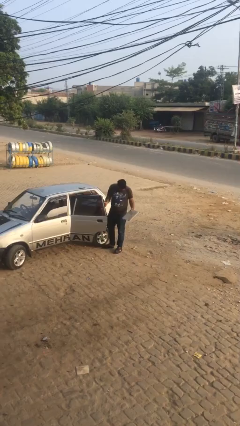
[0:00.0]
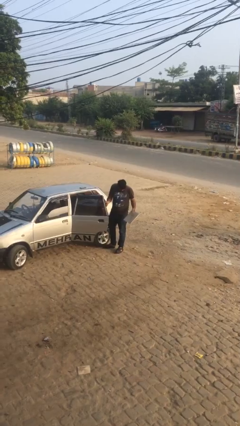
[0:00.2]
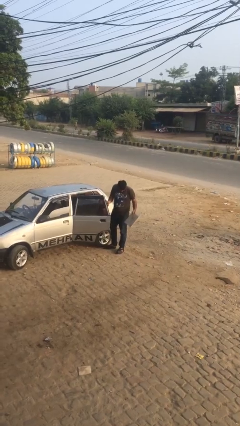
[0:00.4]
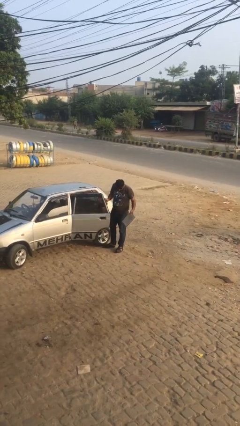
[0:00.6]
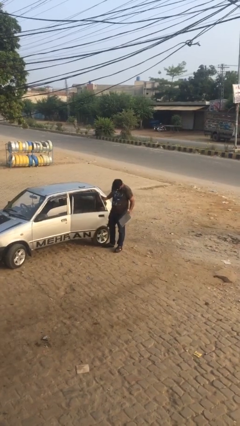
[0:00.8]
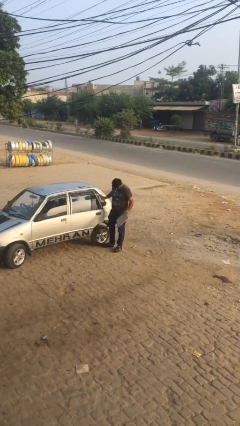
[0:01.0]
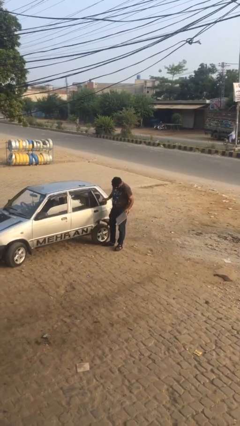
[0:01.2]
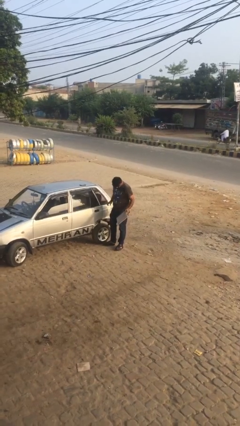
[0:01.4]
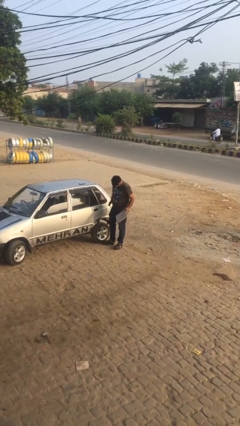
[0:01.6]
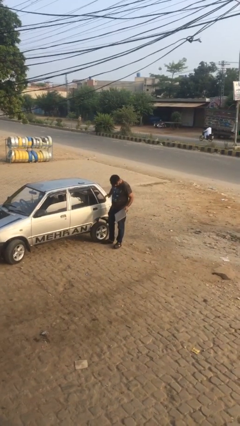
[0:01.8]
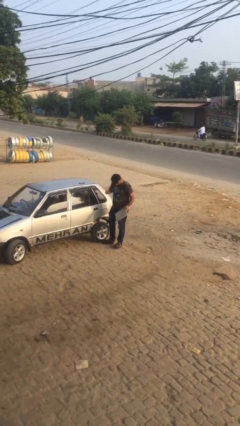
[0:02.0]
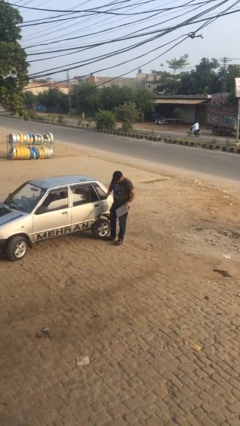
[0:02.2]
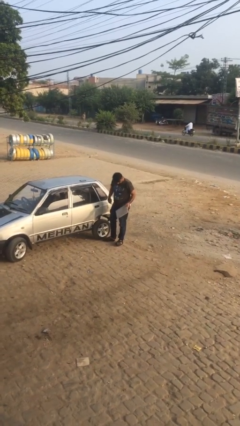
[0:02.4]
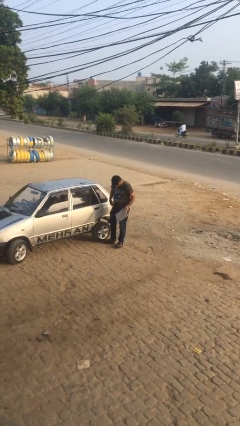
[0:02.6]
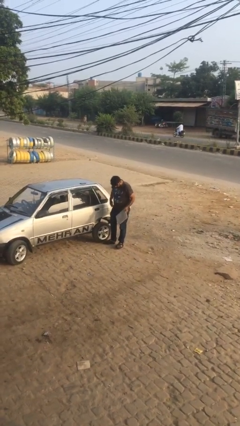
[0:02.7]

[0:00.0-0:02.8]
person closes car door

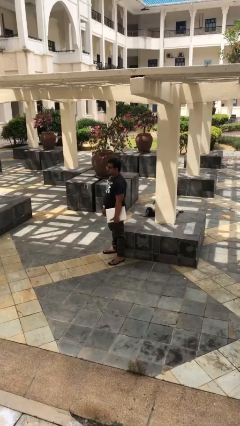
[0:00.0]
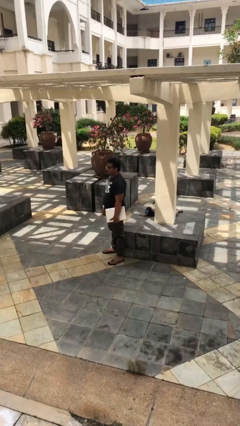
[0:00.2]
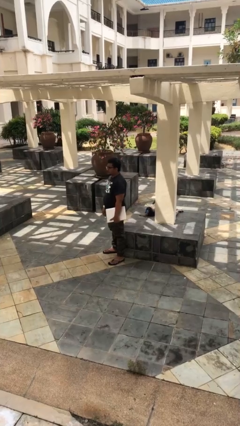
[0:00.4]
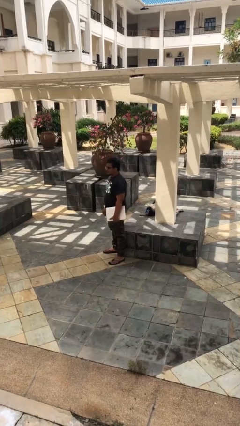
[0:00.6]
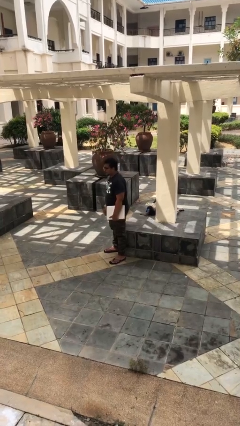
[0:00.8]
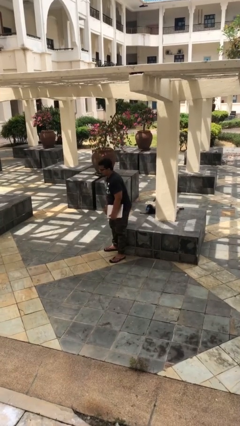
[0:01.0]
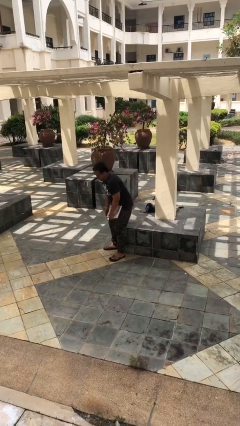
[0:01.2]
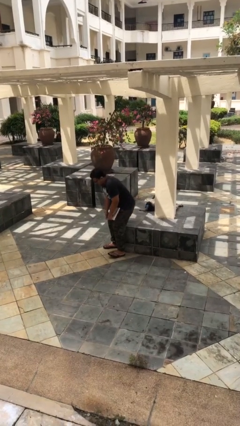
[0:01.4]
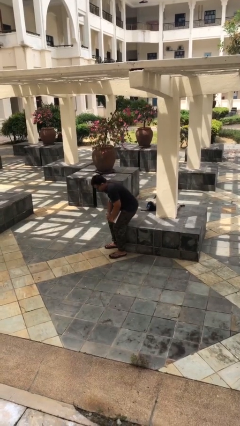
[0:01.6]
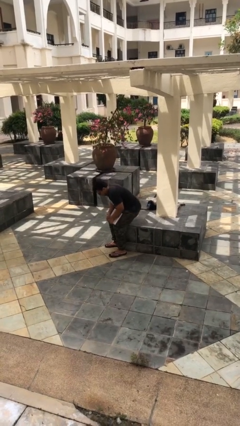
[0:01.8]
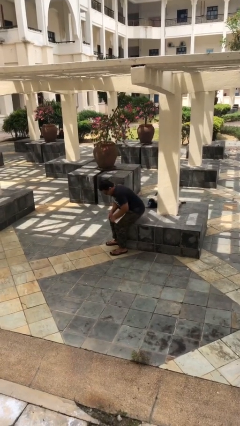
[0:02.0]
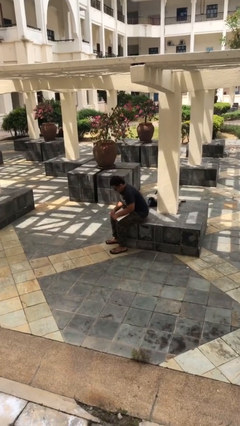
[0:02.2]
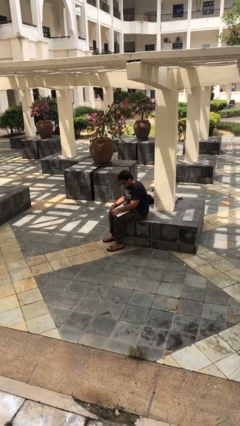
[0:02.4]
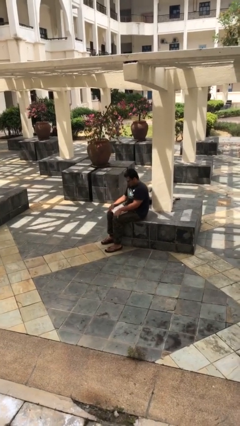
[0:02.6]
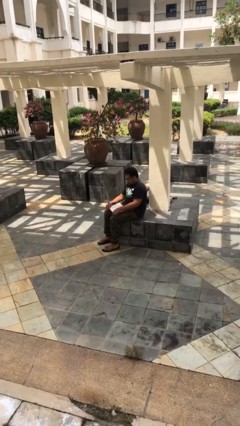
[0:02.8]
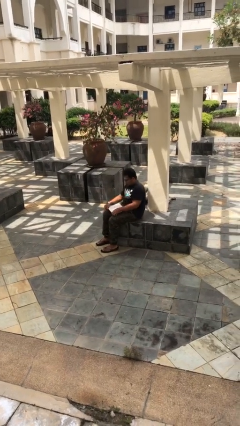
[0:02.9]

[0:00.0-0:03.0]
person sits down

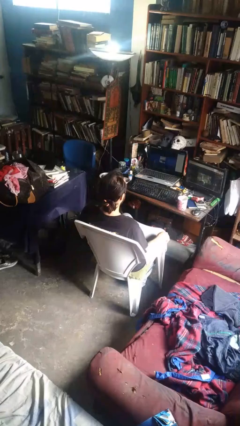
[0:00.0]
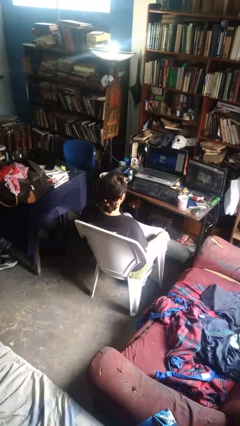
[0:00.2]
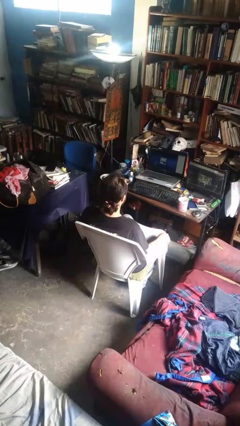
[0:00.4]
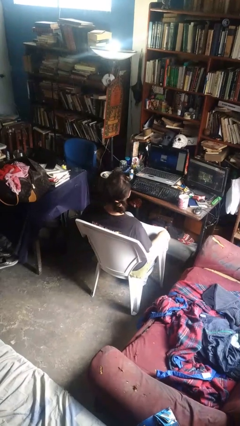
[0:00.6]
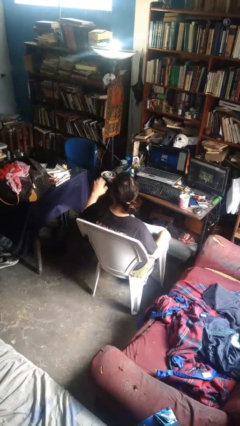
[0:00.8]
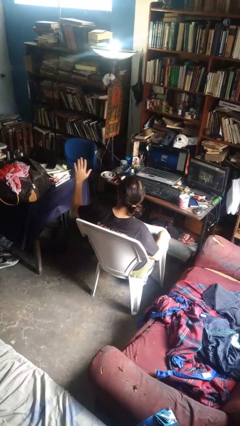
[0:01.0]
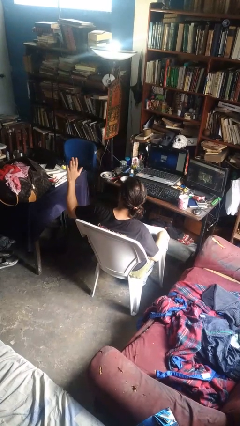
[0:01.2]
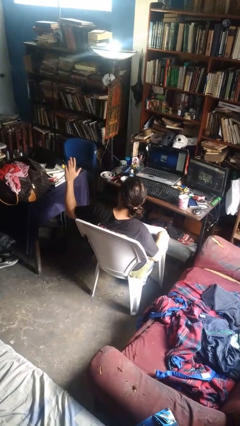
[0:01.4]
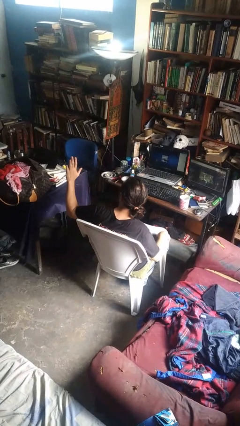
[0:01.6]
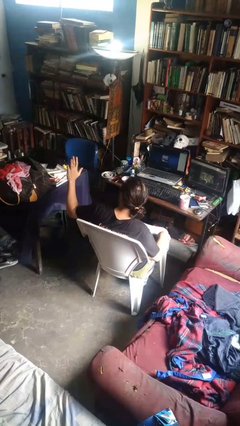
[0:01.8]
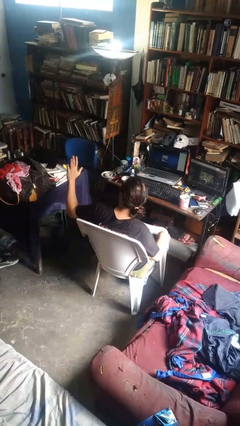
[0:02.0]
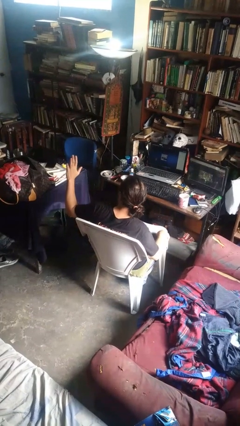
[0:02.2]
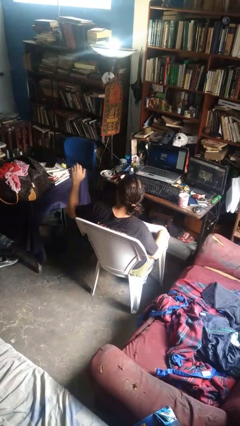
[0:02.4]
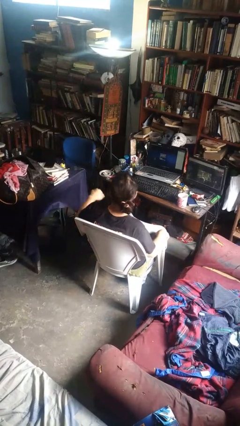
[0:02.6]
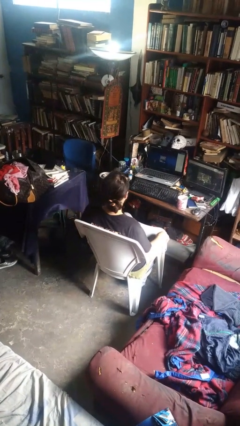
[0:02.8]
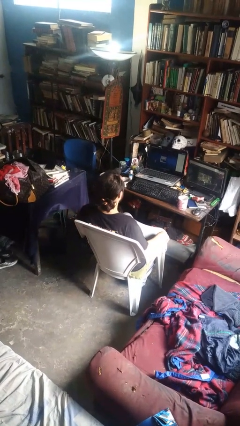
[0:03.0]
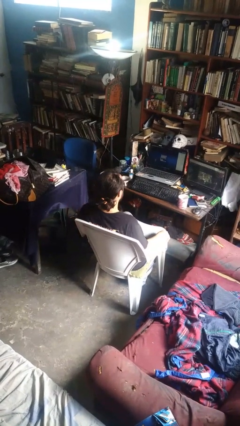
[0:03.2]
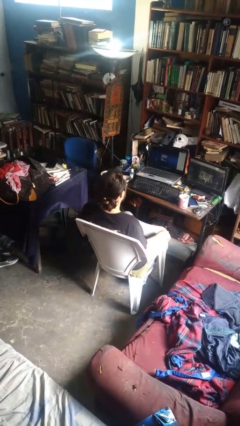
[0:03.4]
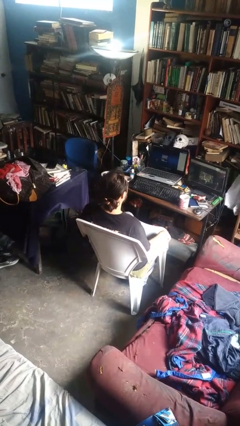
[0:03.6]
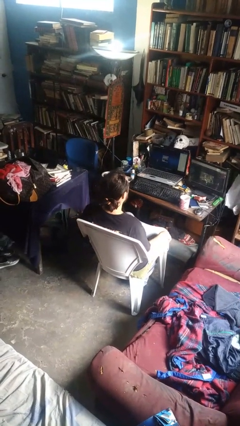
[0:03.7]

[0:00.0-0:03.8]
person gestures number five

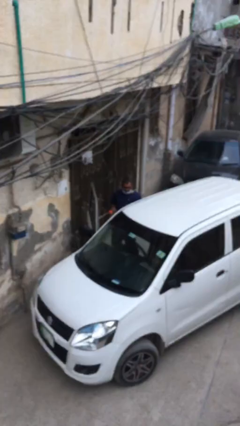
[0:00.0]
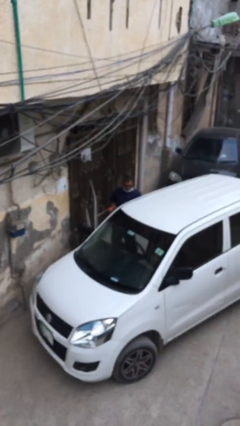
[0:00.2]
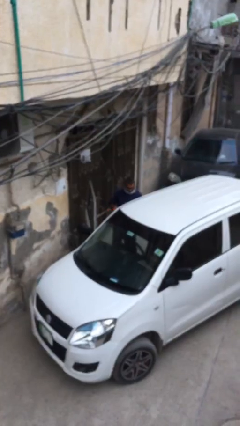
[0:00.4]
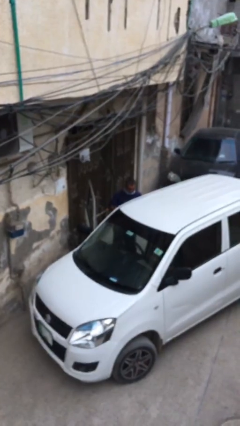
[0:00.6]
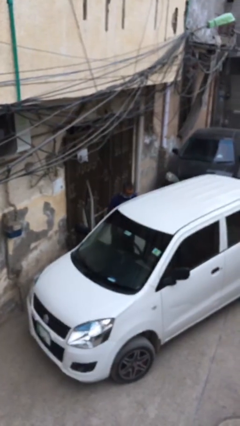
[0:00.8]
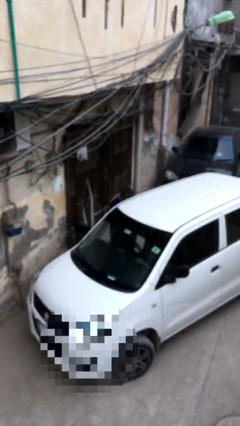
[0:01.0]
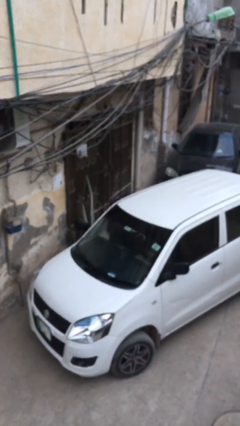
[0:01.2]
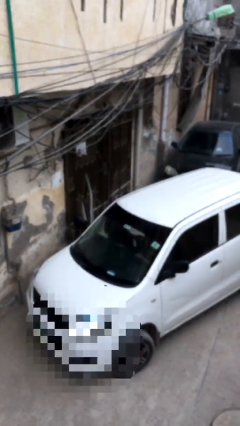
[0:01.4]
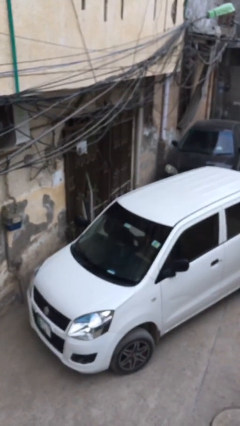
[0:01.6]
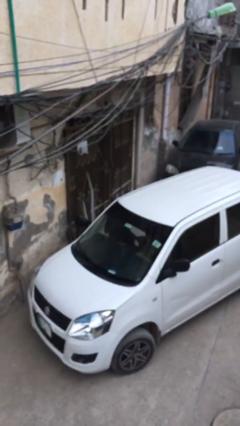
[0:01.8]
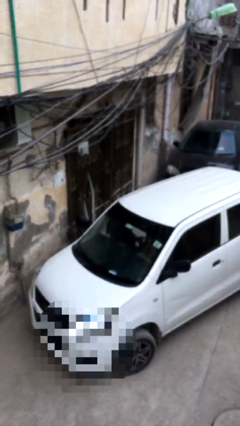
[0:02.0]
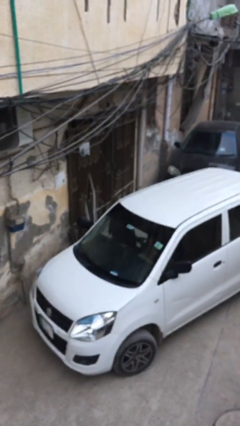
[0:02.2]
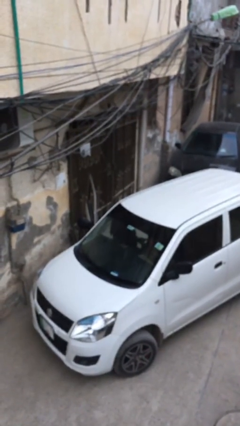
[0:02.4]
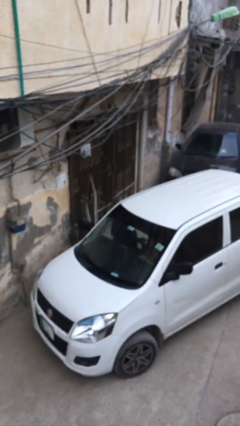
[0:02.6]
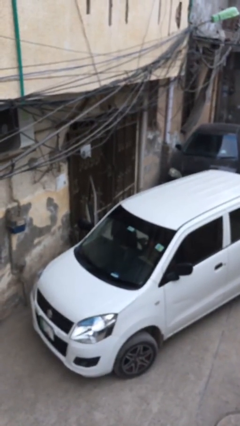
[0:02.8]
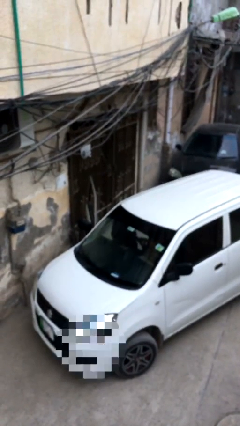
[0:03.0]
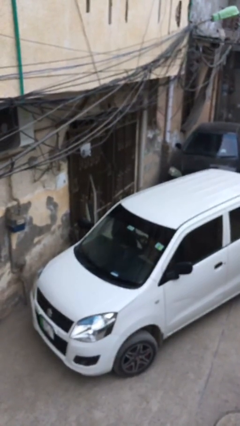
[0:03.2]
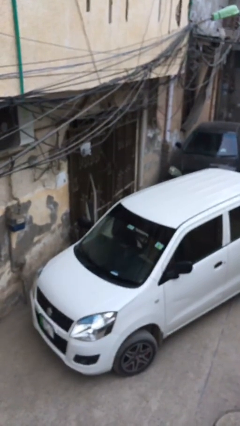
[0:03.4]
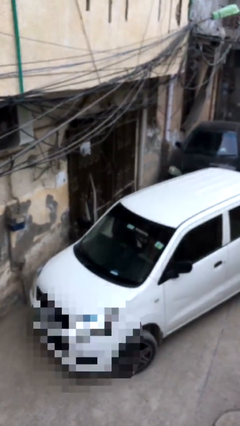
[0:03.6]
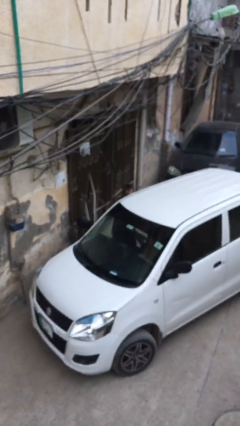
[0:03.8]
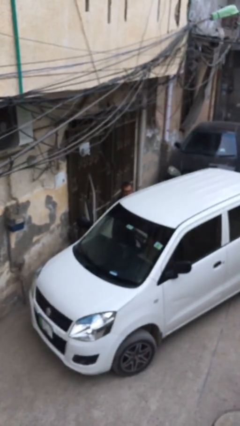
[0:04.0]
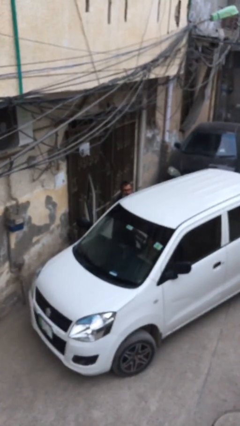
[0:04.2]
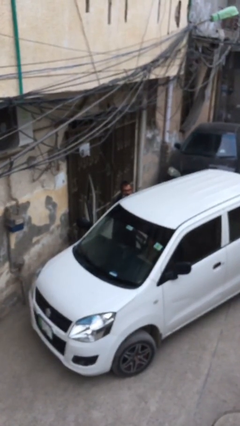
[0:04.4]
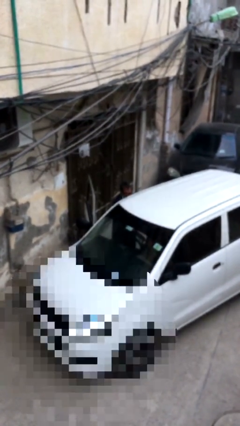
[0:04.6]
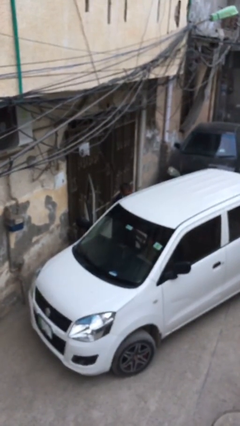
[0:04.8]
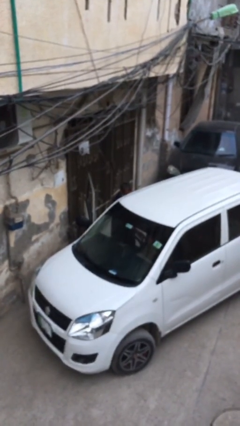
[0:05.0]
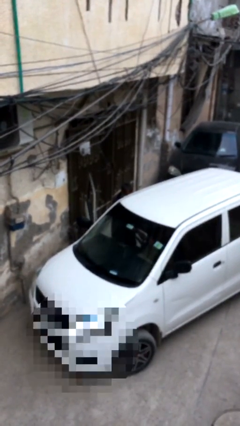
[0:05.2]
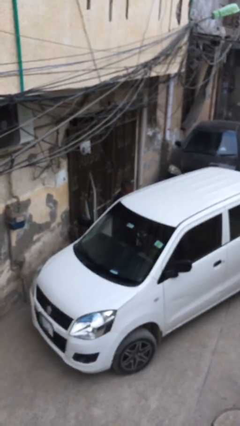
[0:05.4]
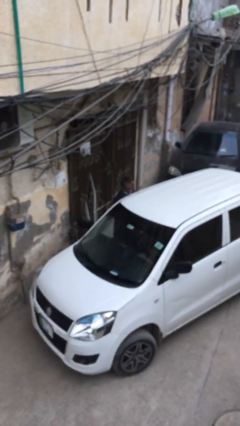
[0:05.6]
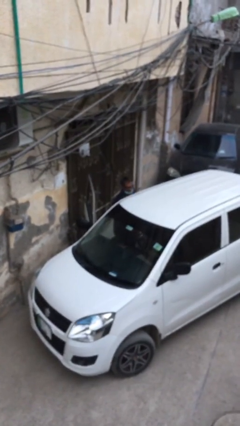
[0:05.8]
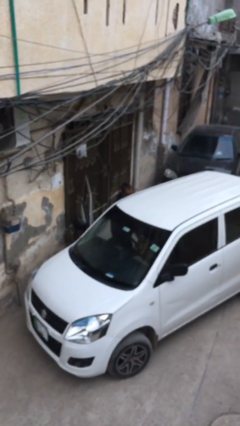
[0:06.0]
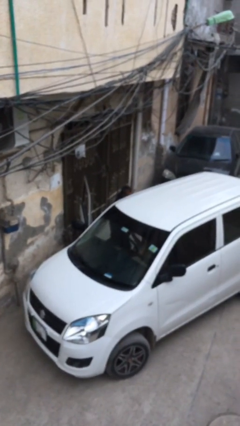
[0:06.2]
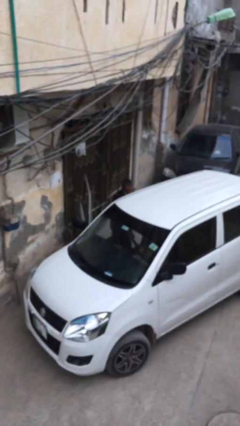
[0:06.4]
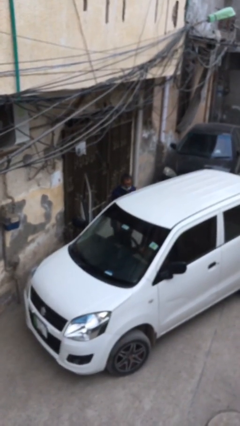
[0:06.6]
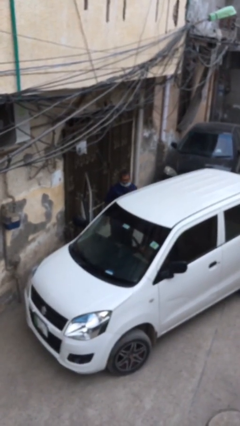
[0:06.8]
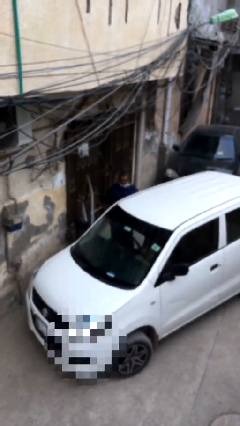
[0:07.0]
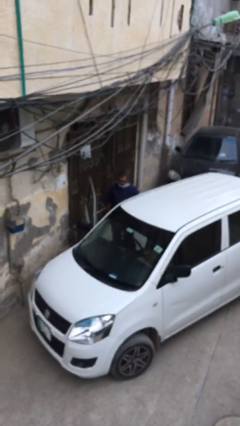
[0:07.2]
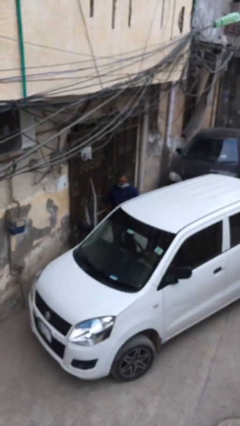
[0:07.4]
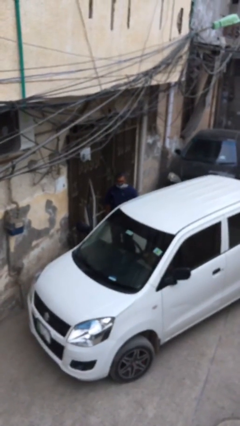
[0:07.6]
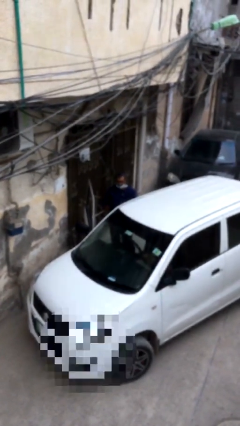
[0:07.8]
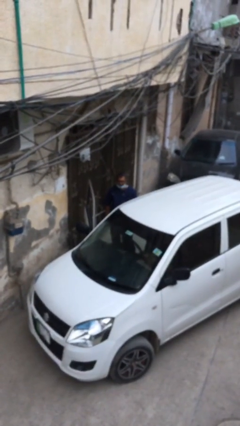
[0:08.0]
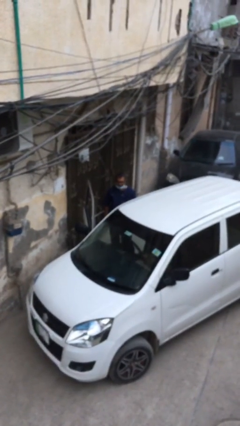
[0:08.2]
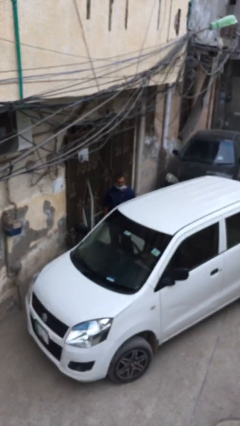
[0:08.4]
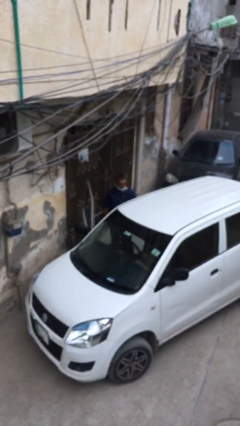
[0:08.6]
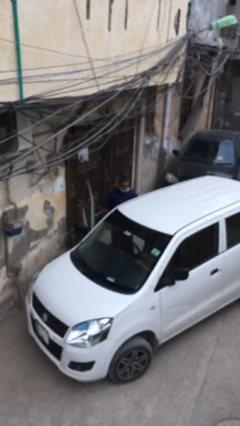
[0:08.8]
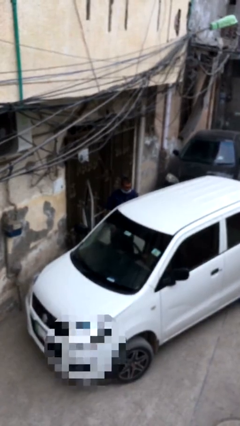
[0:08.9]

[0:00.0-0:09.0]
person loads car
